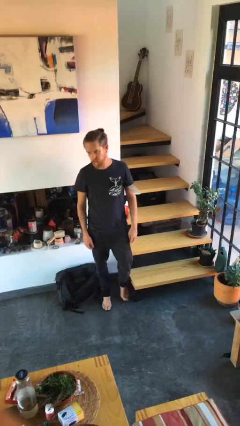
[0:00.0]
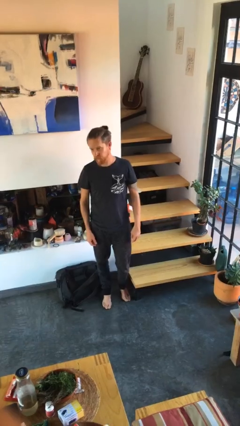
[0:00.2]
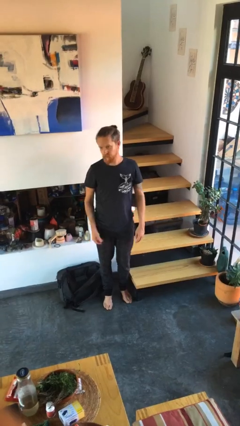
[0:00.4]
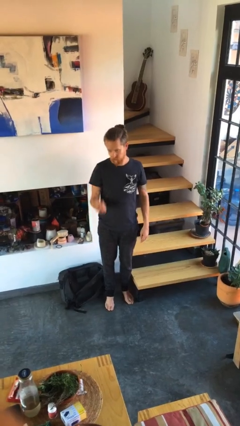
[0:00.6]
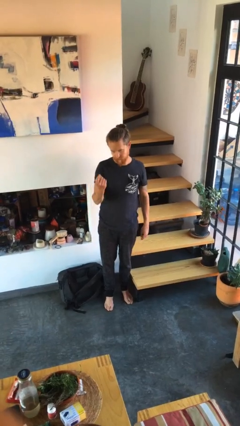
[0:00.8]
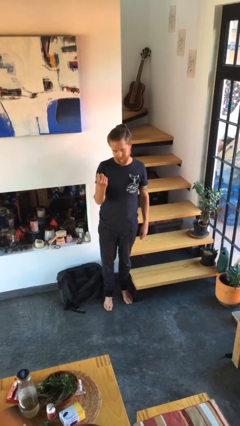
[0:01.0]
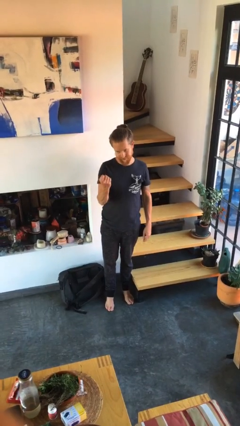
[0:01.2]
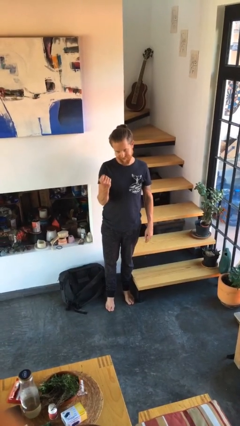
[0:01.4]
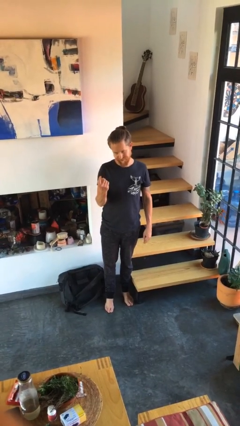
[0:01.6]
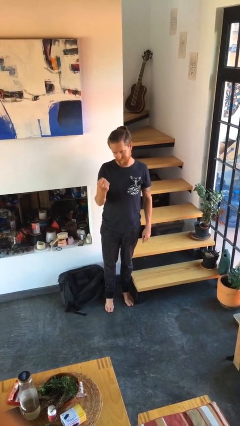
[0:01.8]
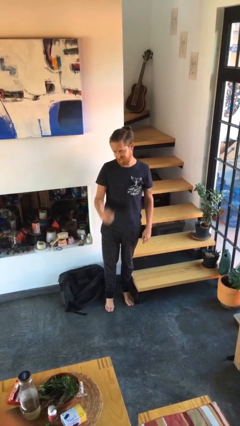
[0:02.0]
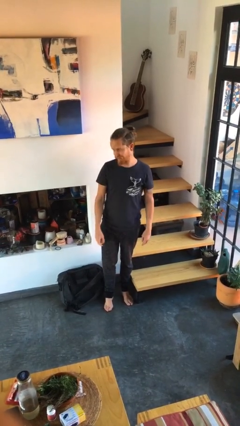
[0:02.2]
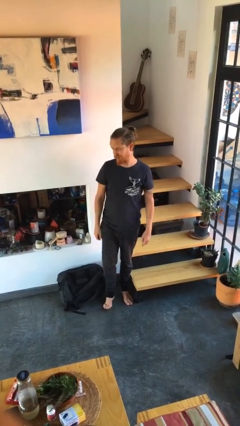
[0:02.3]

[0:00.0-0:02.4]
person gestures come here

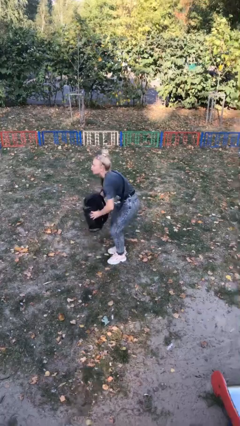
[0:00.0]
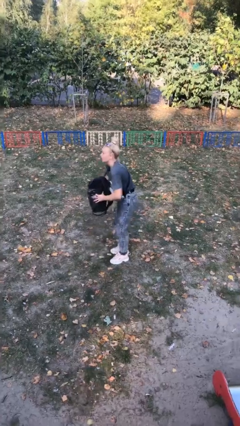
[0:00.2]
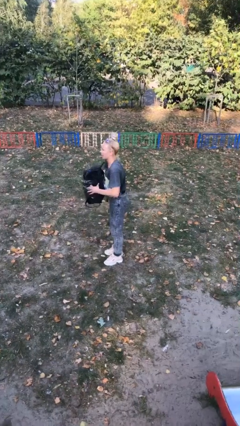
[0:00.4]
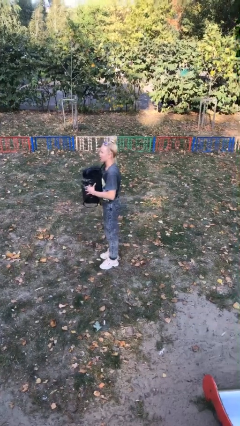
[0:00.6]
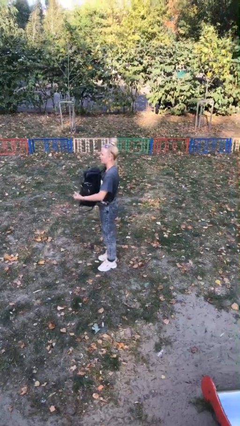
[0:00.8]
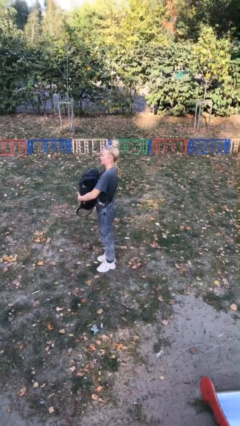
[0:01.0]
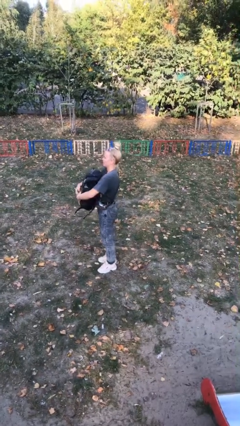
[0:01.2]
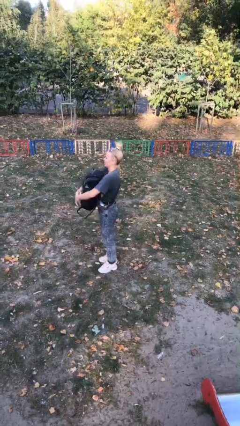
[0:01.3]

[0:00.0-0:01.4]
person picks up object from floor

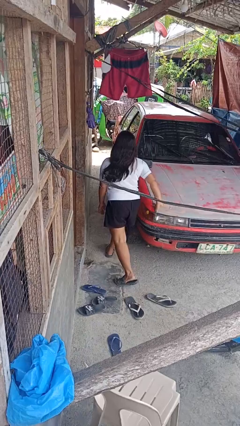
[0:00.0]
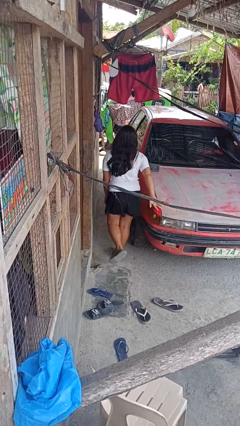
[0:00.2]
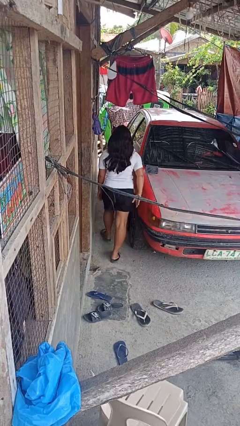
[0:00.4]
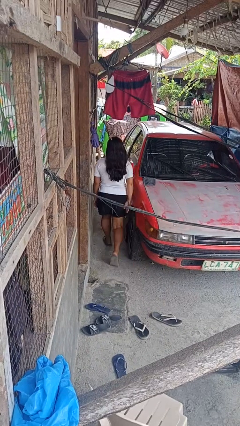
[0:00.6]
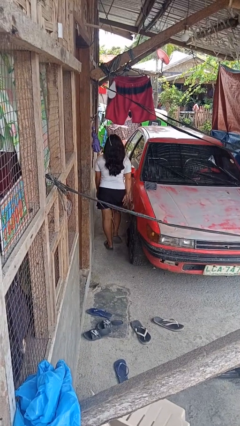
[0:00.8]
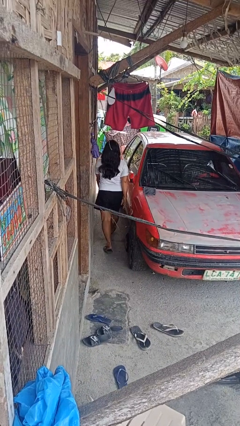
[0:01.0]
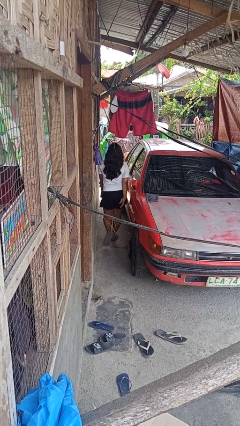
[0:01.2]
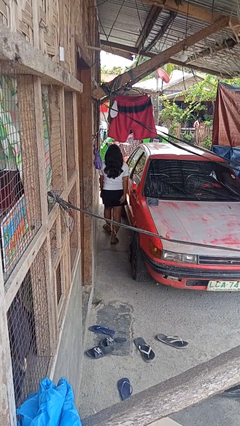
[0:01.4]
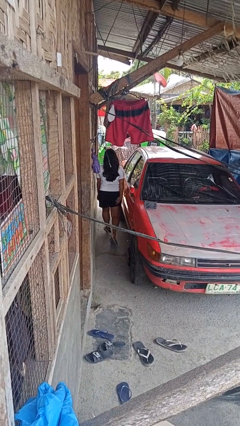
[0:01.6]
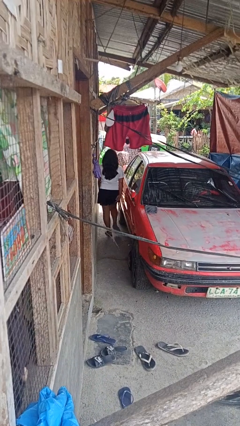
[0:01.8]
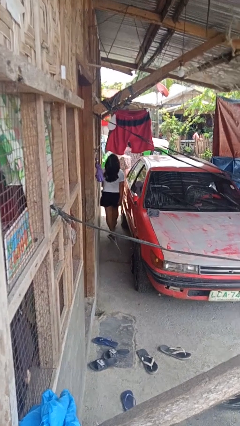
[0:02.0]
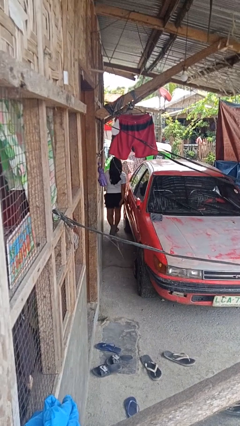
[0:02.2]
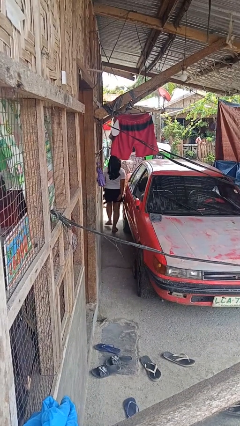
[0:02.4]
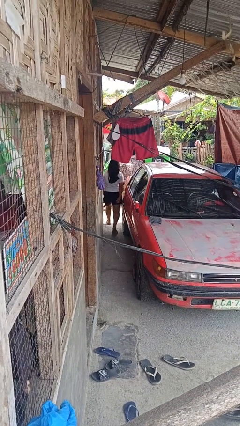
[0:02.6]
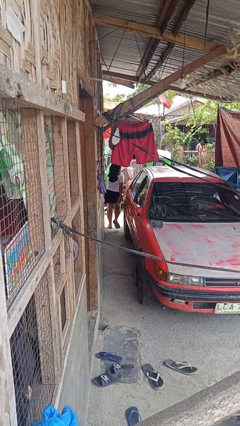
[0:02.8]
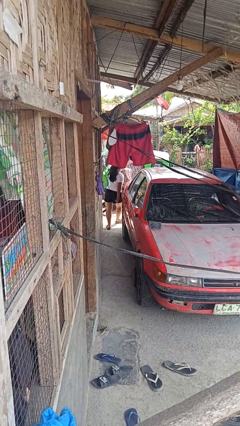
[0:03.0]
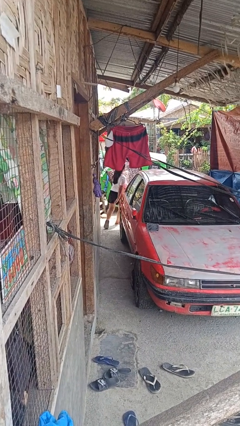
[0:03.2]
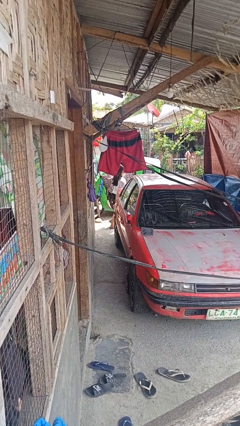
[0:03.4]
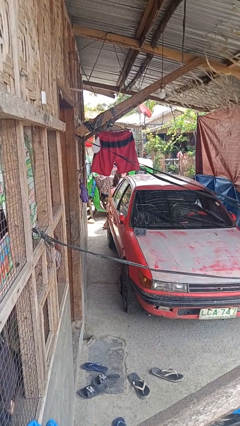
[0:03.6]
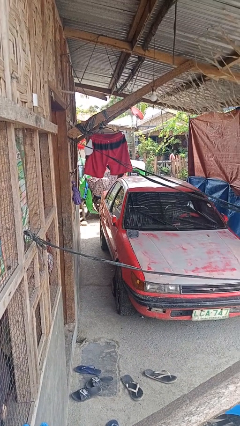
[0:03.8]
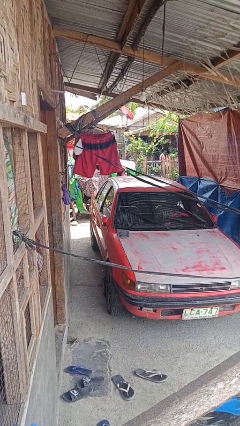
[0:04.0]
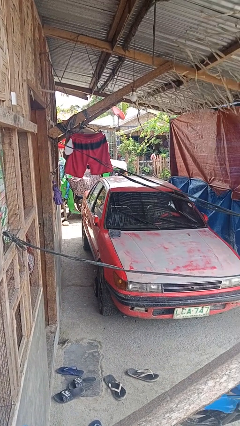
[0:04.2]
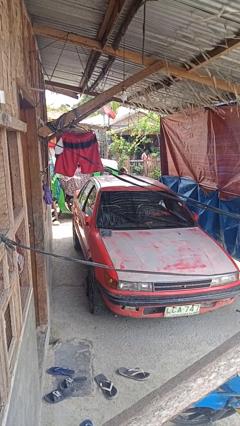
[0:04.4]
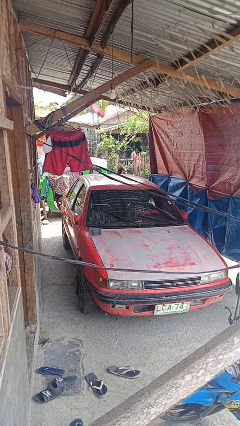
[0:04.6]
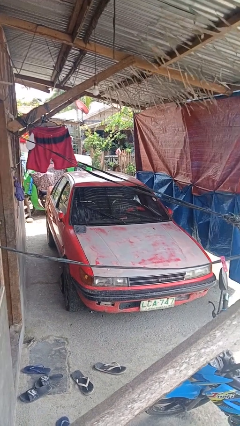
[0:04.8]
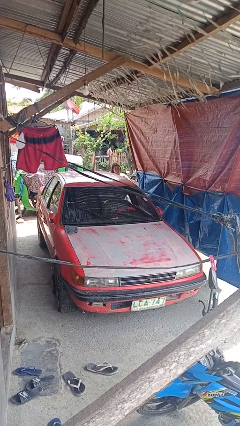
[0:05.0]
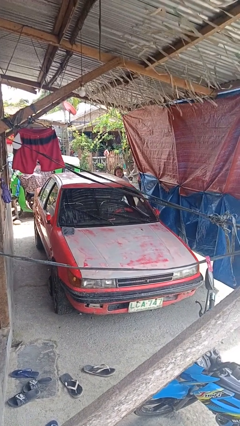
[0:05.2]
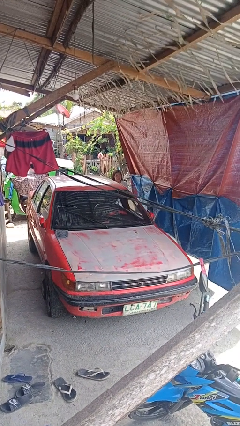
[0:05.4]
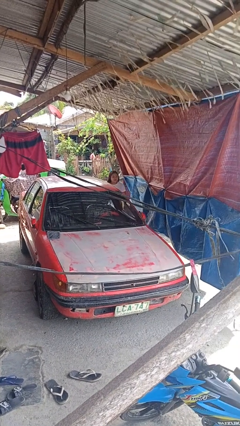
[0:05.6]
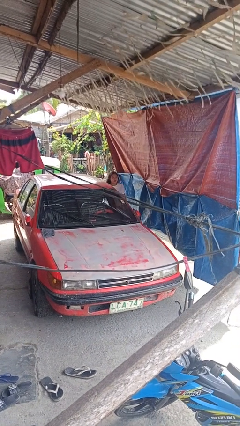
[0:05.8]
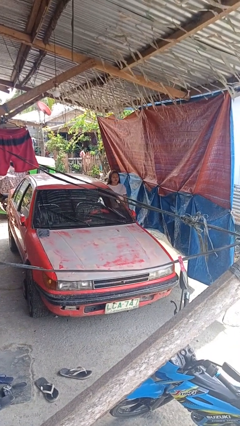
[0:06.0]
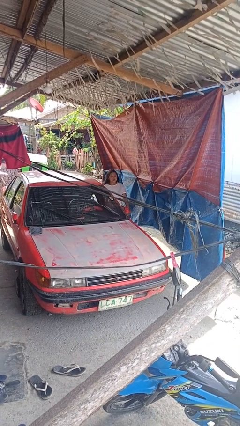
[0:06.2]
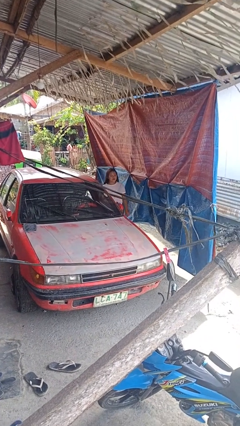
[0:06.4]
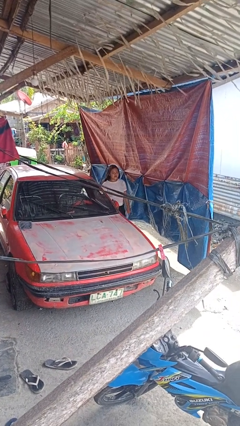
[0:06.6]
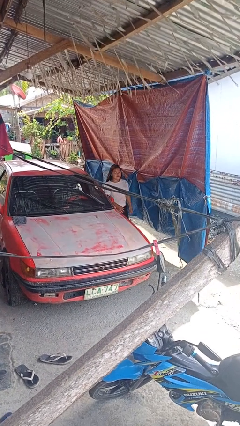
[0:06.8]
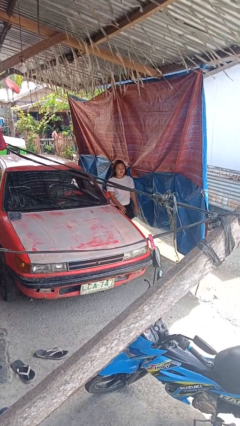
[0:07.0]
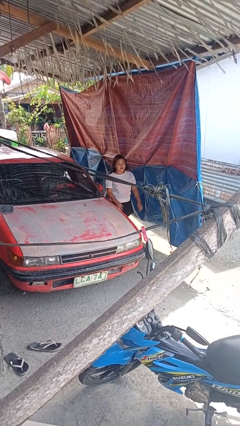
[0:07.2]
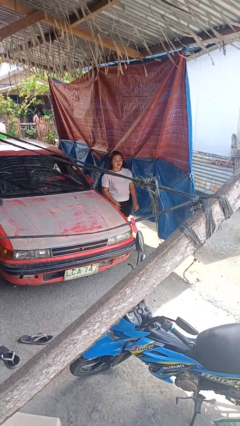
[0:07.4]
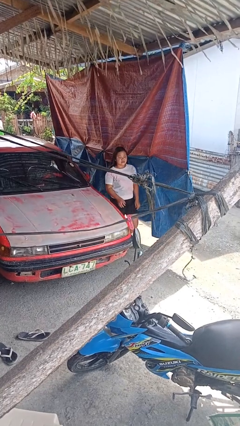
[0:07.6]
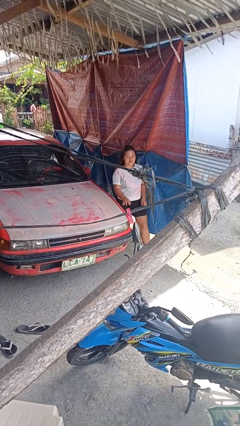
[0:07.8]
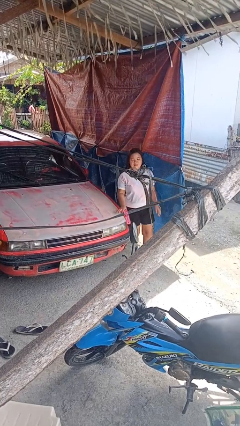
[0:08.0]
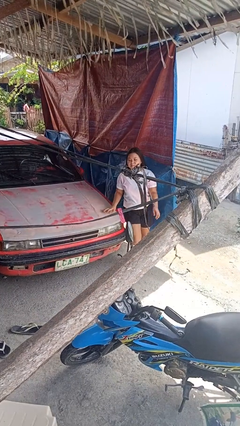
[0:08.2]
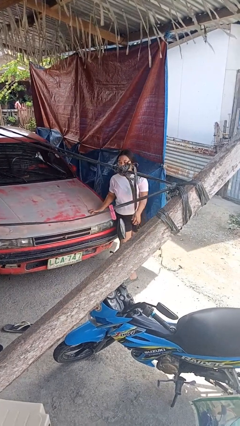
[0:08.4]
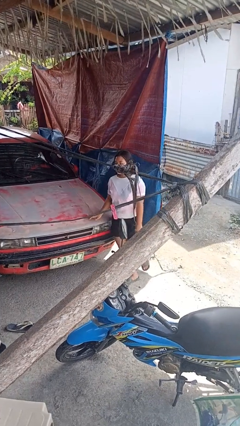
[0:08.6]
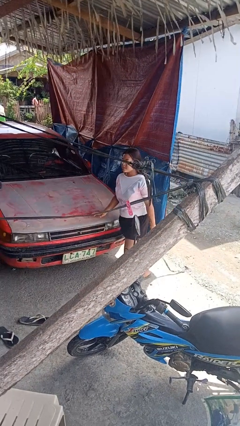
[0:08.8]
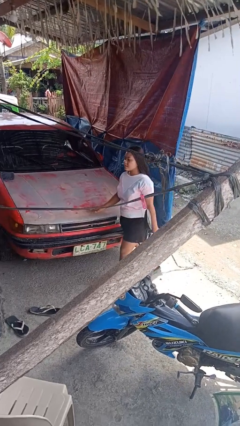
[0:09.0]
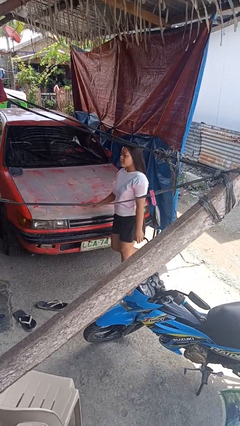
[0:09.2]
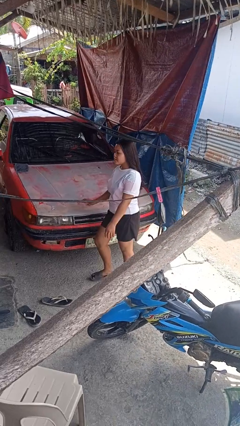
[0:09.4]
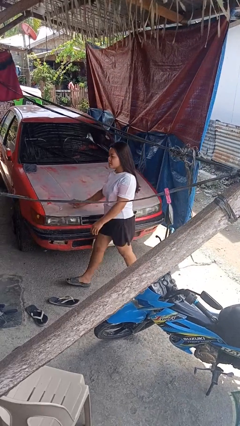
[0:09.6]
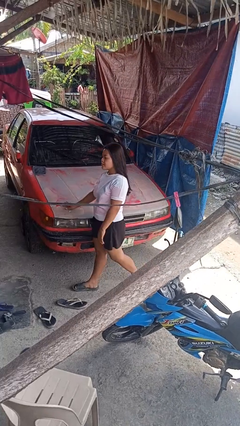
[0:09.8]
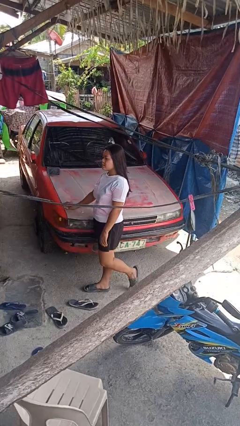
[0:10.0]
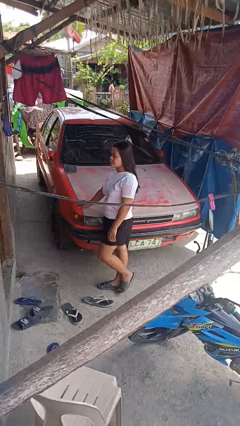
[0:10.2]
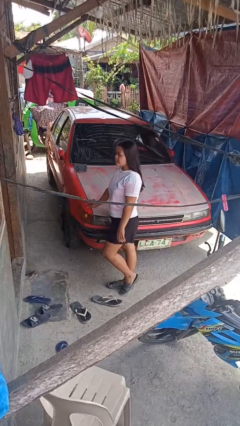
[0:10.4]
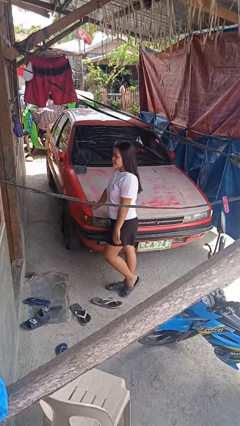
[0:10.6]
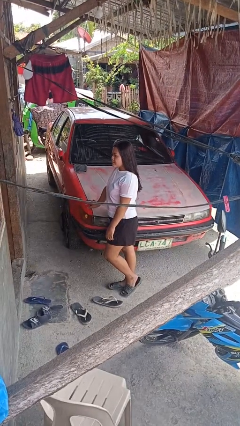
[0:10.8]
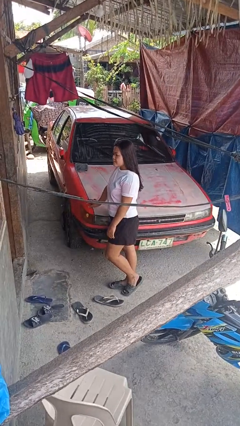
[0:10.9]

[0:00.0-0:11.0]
person walks around car

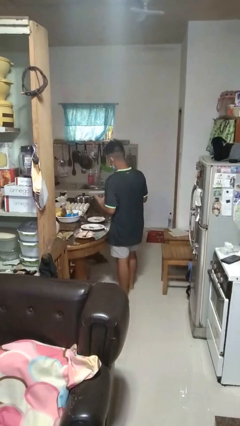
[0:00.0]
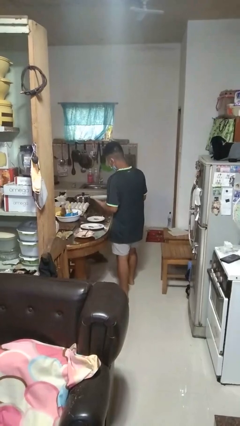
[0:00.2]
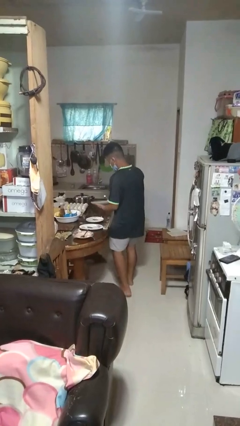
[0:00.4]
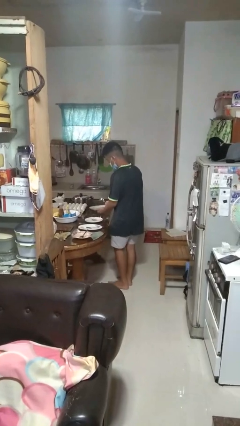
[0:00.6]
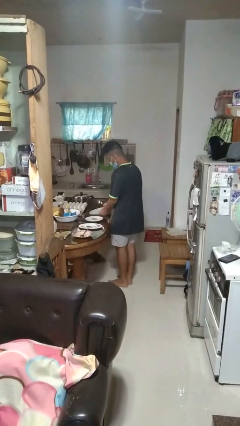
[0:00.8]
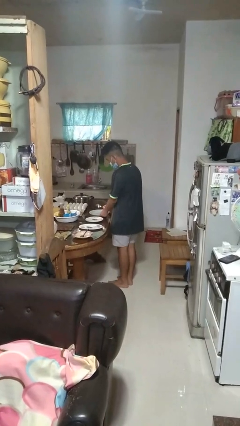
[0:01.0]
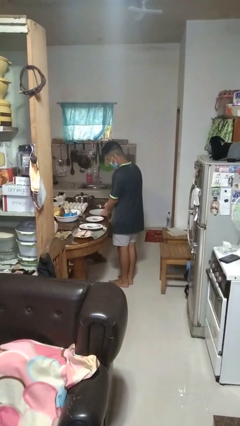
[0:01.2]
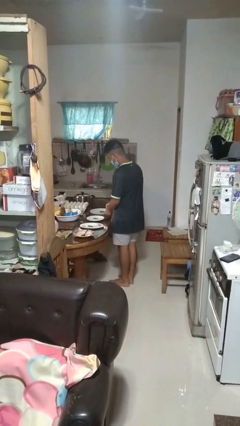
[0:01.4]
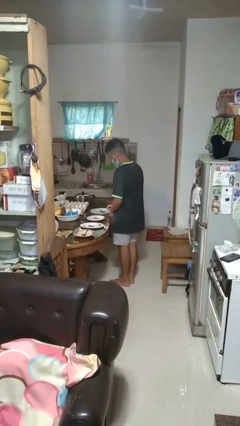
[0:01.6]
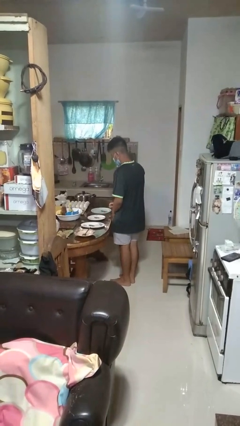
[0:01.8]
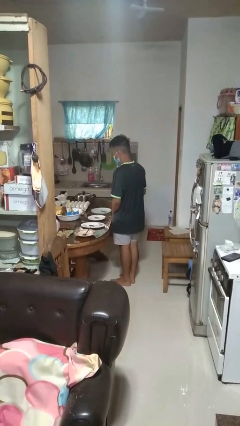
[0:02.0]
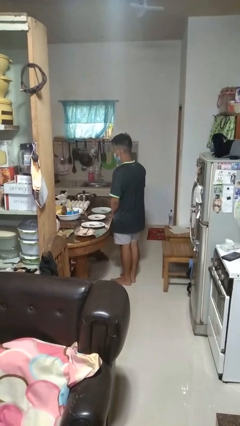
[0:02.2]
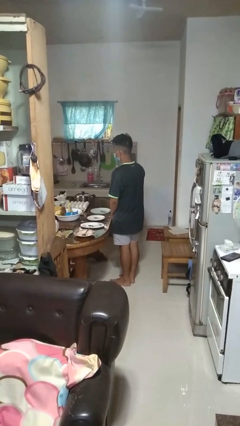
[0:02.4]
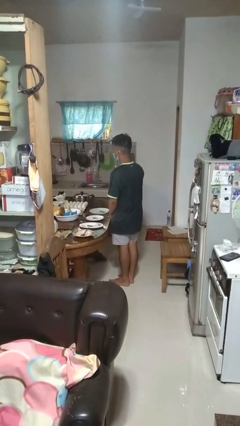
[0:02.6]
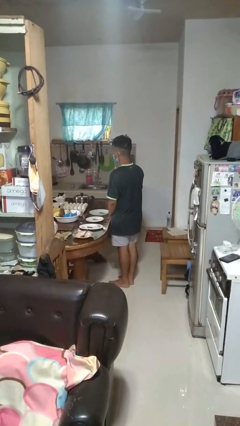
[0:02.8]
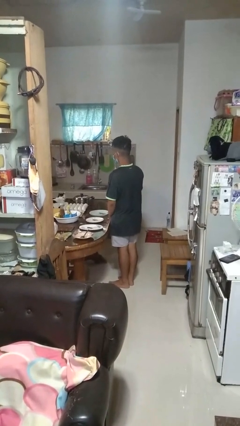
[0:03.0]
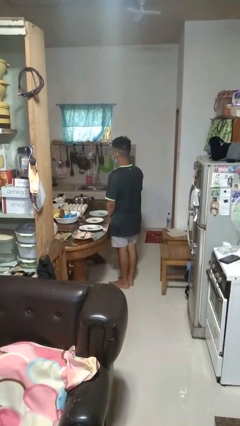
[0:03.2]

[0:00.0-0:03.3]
person sets table
